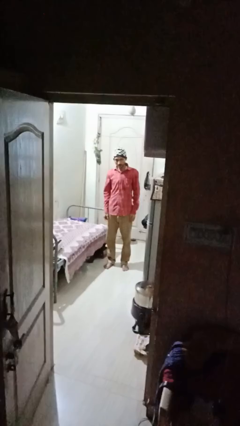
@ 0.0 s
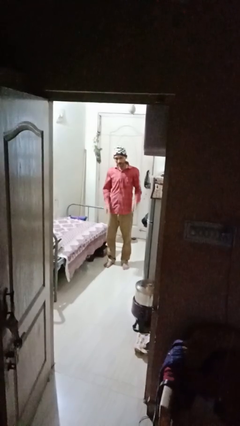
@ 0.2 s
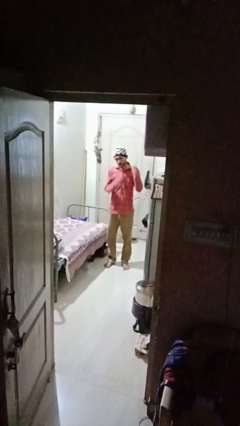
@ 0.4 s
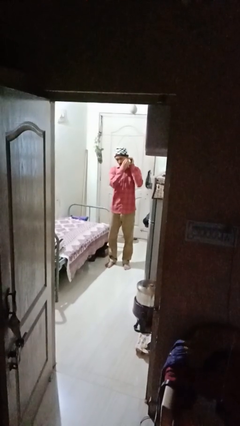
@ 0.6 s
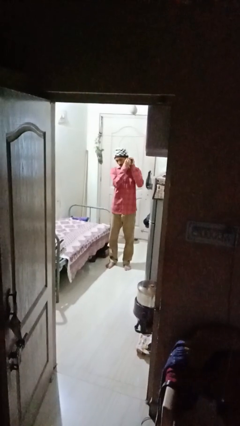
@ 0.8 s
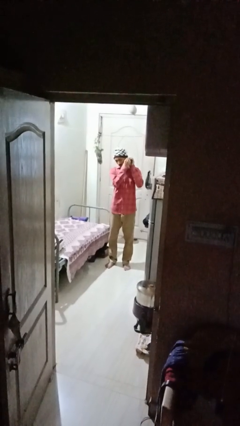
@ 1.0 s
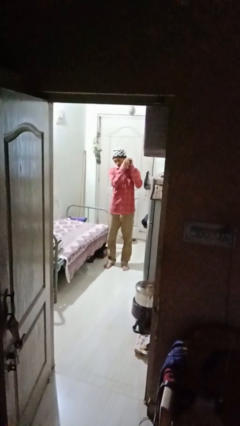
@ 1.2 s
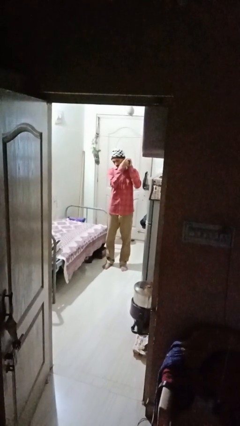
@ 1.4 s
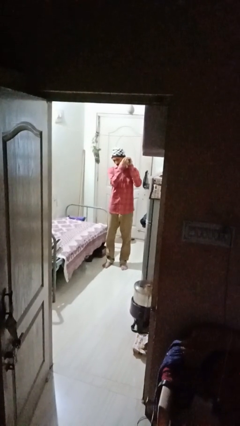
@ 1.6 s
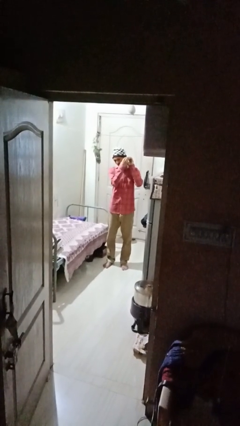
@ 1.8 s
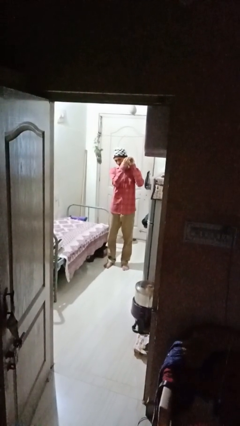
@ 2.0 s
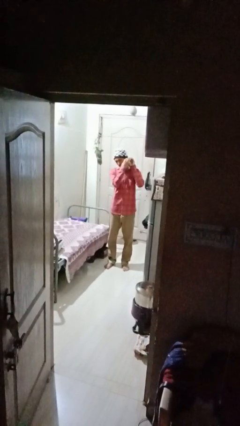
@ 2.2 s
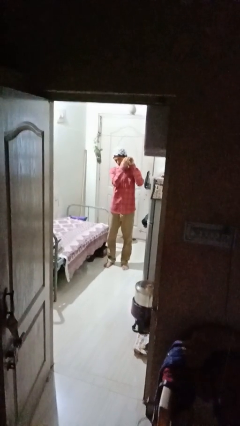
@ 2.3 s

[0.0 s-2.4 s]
person puts on earrings

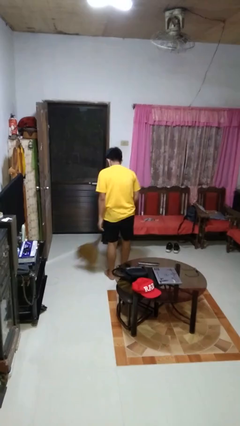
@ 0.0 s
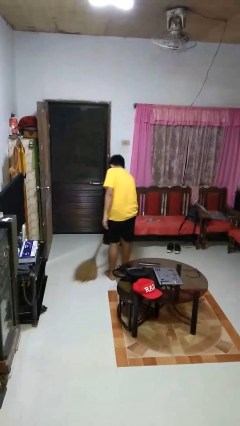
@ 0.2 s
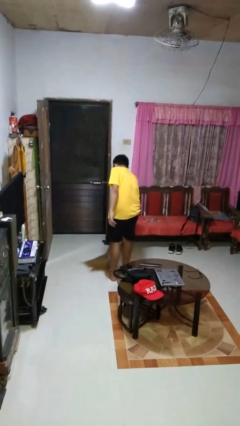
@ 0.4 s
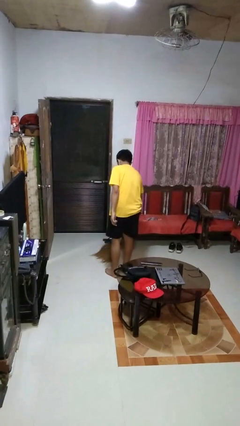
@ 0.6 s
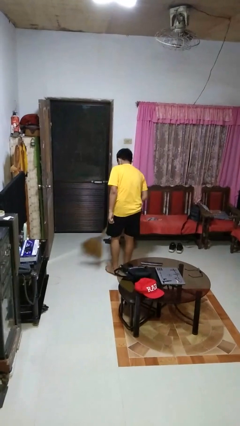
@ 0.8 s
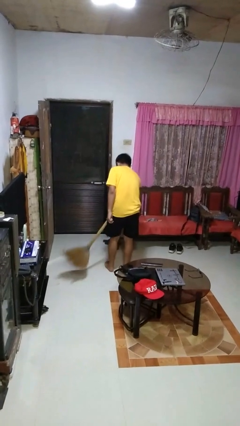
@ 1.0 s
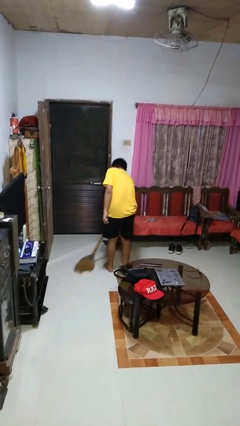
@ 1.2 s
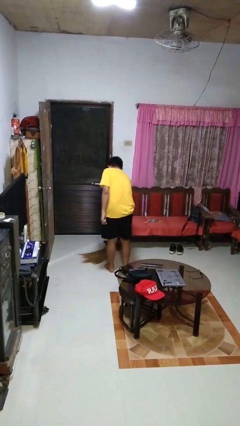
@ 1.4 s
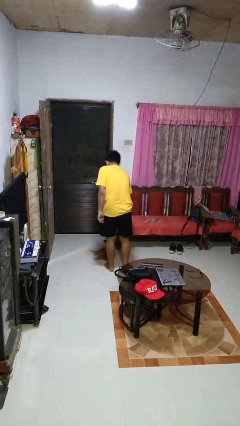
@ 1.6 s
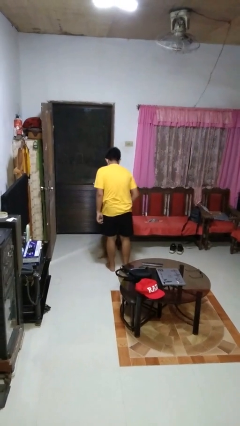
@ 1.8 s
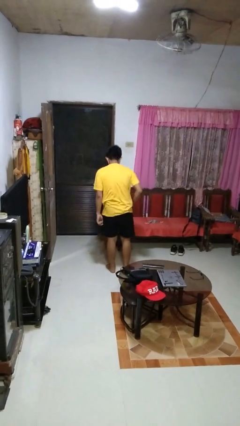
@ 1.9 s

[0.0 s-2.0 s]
person sweeps floor

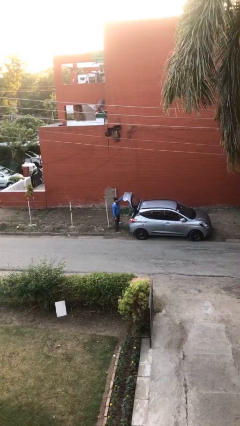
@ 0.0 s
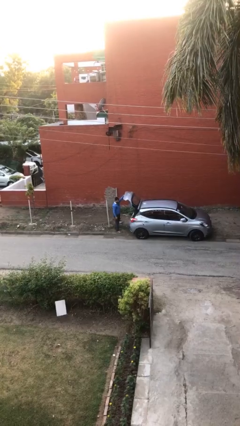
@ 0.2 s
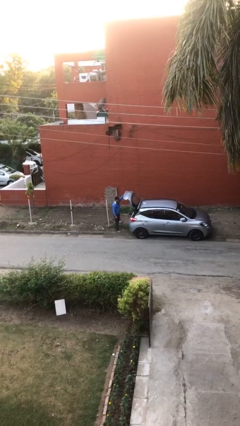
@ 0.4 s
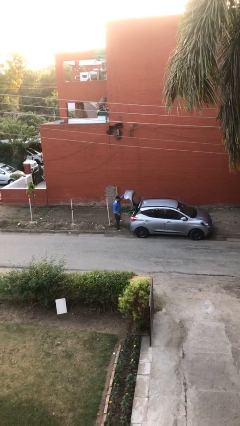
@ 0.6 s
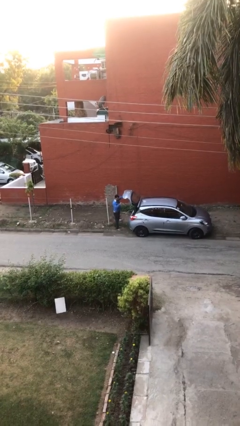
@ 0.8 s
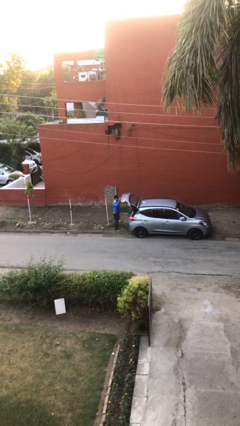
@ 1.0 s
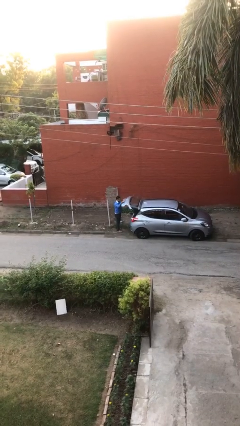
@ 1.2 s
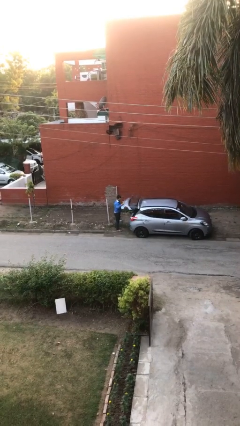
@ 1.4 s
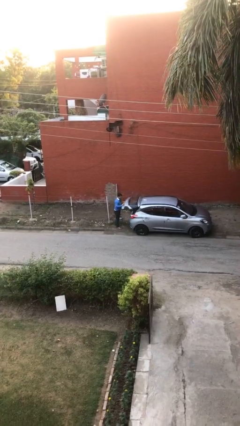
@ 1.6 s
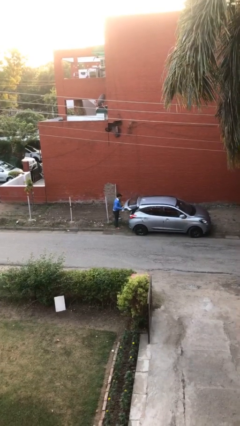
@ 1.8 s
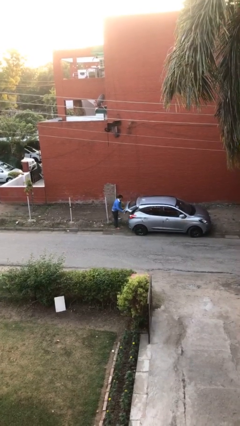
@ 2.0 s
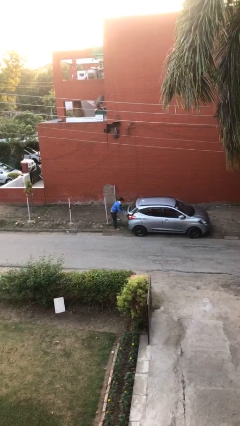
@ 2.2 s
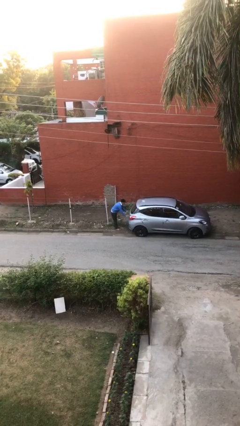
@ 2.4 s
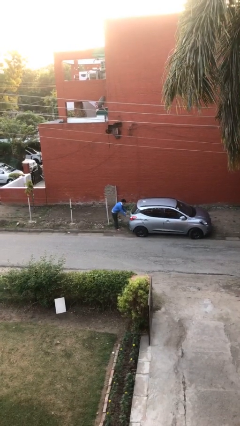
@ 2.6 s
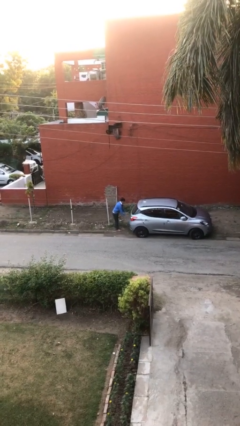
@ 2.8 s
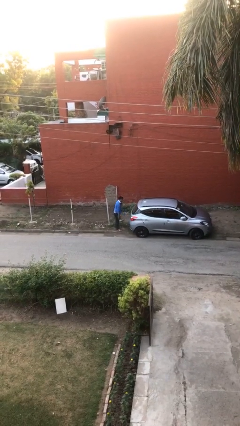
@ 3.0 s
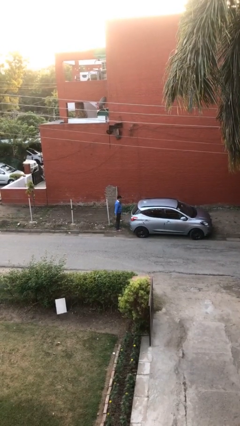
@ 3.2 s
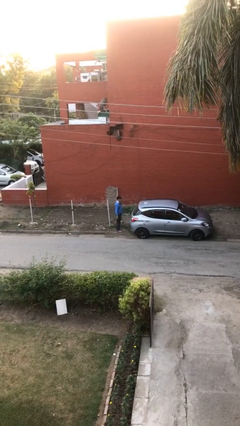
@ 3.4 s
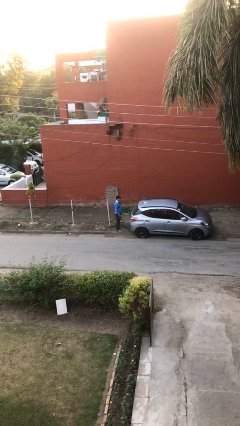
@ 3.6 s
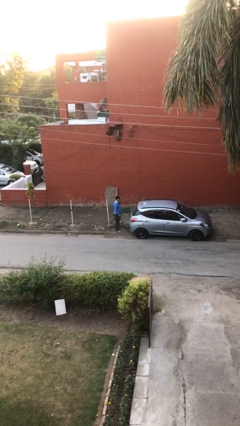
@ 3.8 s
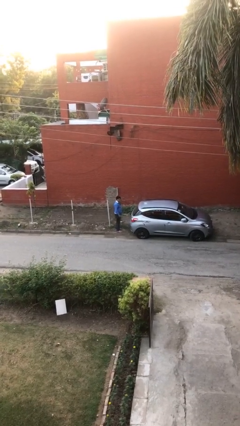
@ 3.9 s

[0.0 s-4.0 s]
person closes car trunk

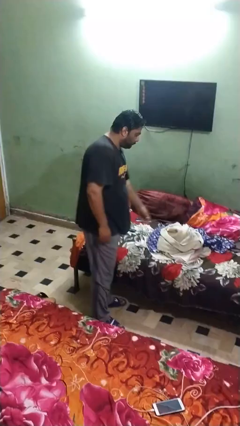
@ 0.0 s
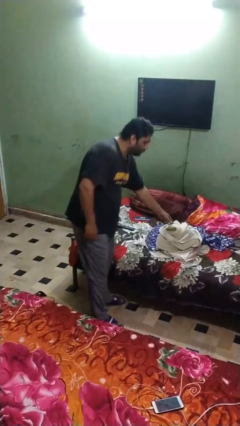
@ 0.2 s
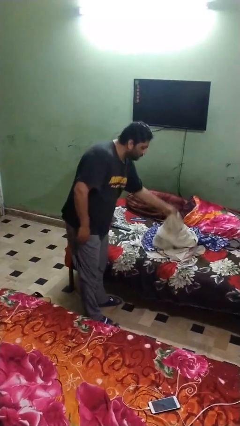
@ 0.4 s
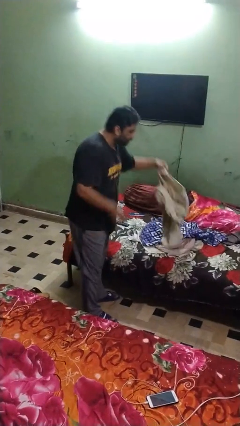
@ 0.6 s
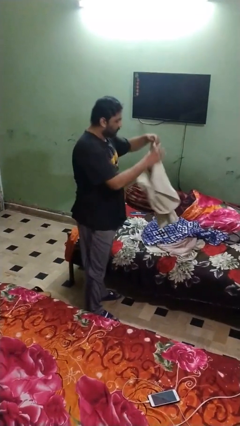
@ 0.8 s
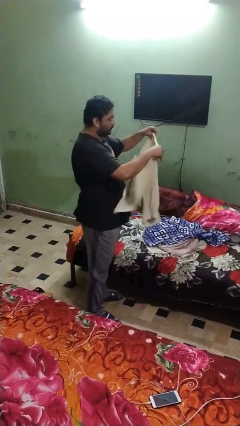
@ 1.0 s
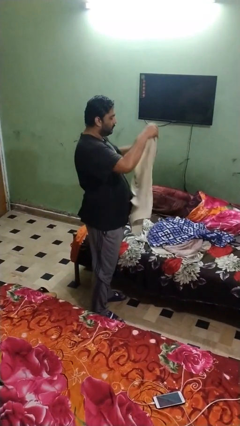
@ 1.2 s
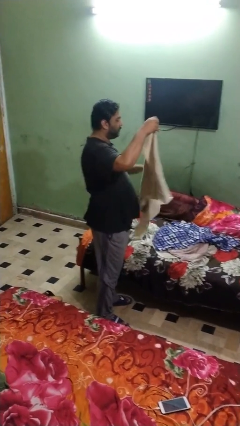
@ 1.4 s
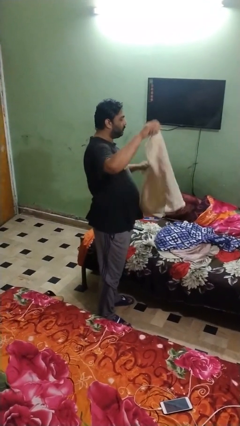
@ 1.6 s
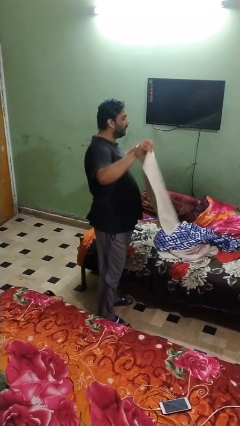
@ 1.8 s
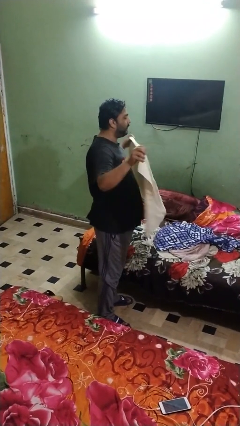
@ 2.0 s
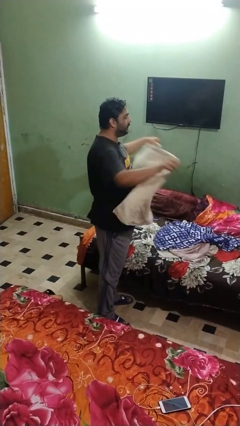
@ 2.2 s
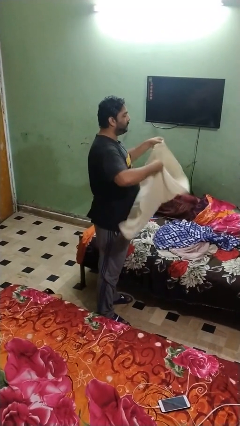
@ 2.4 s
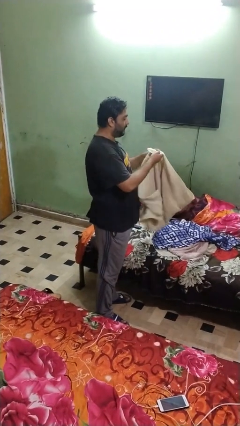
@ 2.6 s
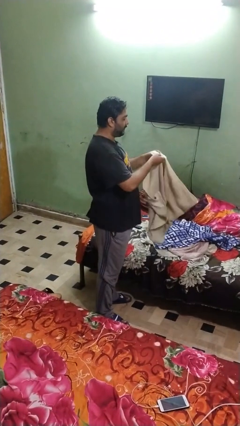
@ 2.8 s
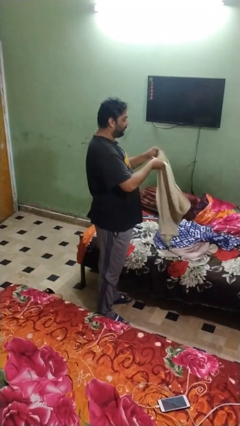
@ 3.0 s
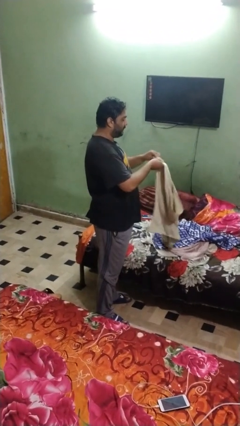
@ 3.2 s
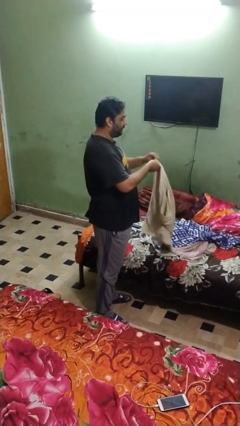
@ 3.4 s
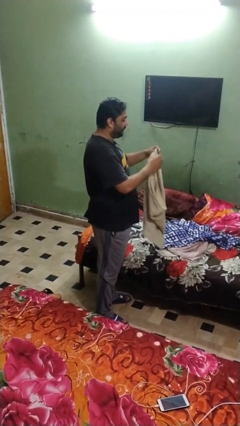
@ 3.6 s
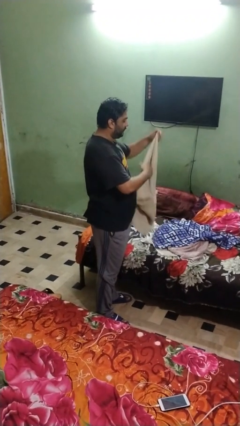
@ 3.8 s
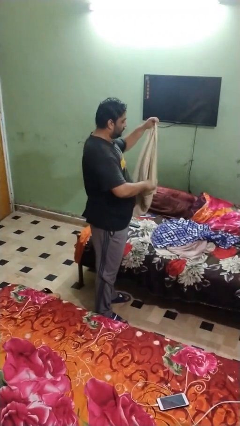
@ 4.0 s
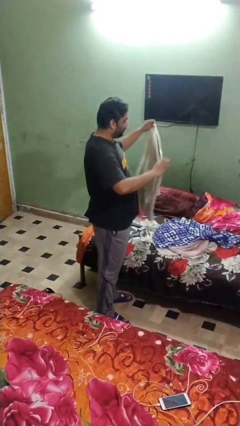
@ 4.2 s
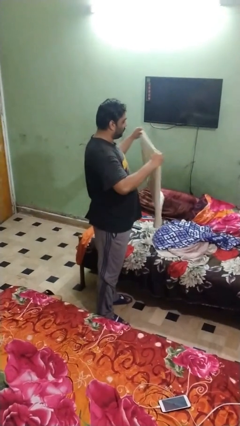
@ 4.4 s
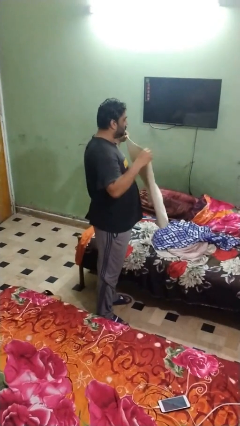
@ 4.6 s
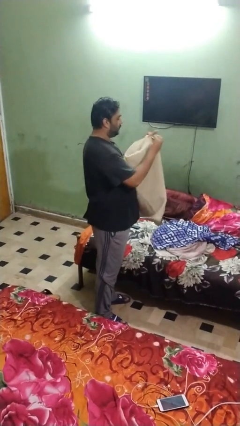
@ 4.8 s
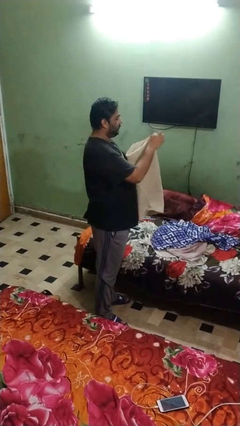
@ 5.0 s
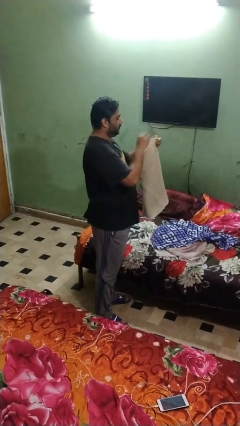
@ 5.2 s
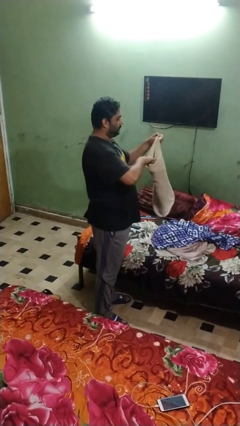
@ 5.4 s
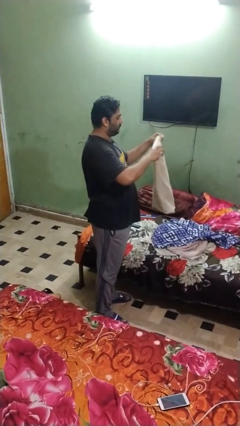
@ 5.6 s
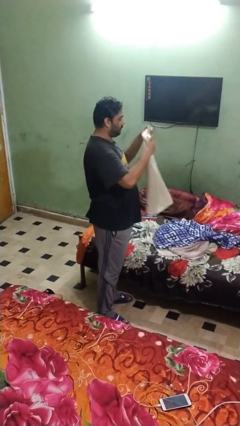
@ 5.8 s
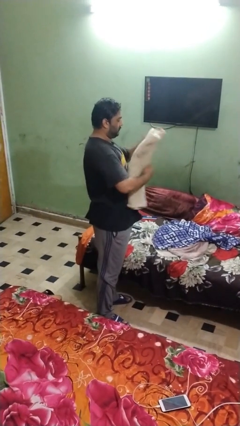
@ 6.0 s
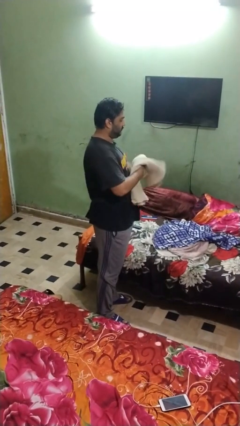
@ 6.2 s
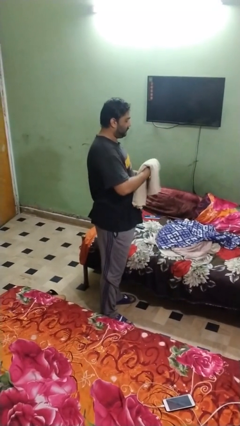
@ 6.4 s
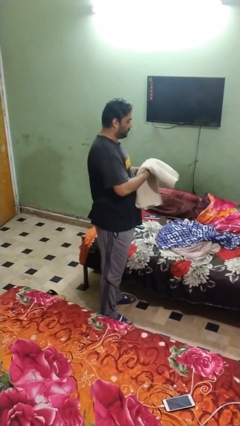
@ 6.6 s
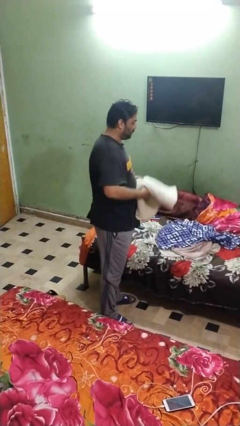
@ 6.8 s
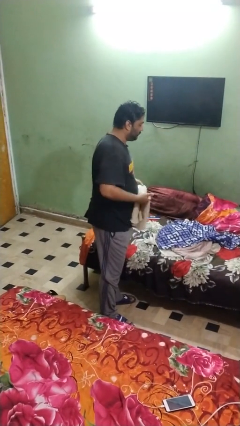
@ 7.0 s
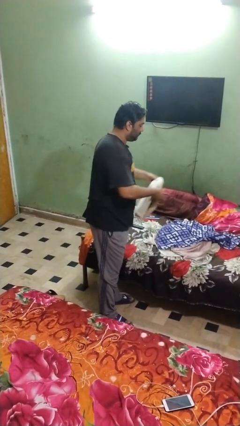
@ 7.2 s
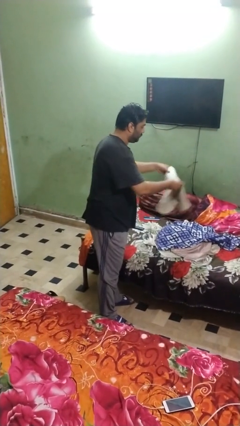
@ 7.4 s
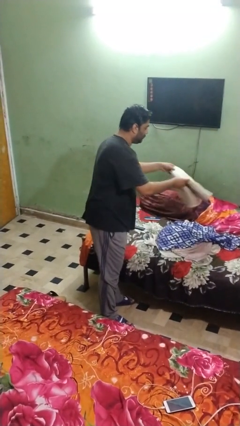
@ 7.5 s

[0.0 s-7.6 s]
person folds towel

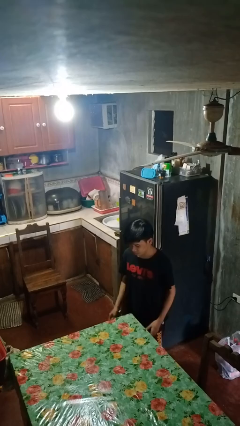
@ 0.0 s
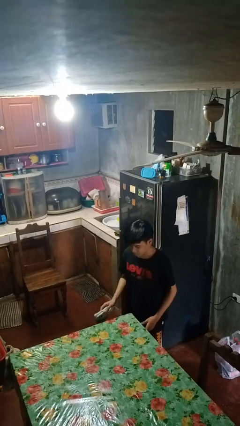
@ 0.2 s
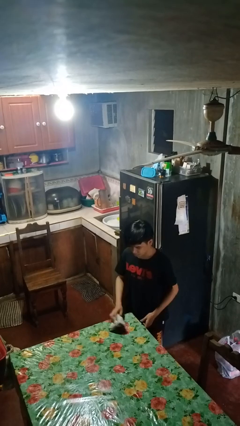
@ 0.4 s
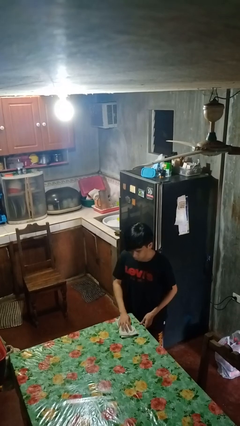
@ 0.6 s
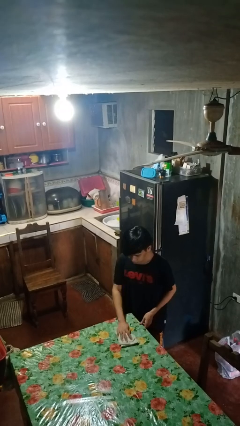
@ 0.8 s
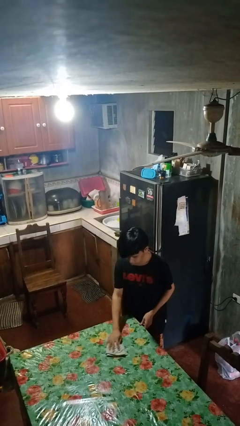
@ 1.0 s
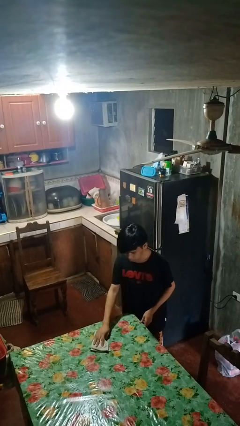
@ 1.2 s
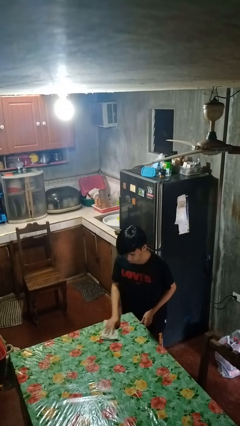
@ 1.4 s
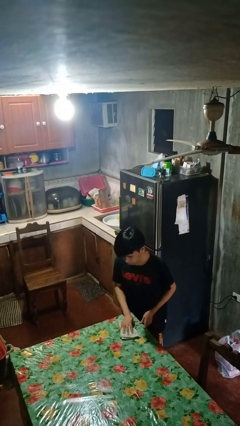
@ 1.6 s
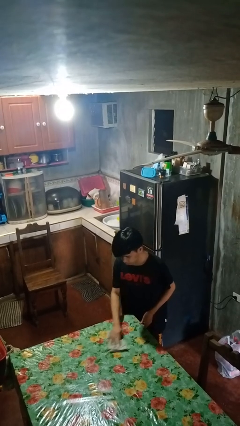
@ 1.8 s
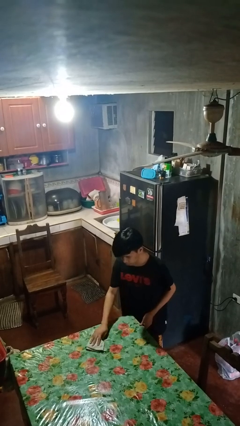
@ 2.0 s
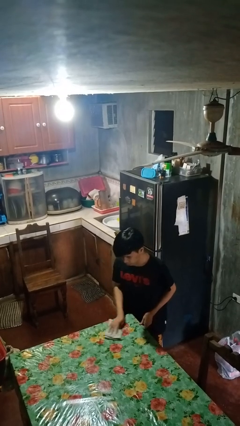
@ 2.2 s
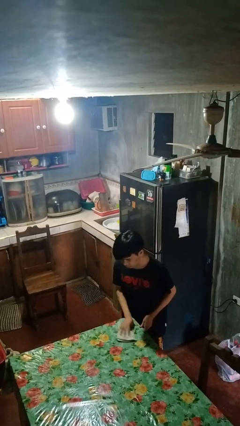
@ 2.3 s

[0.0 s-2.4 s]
person cleans table with rag
